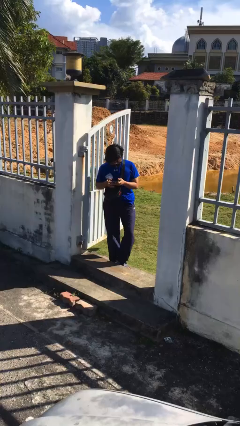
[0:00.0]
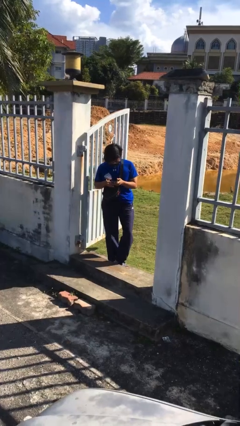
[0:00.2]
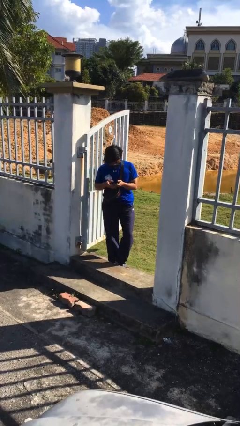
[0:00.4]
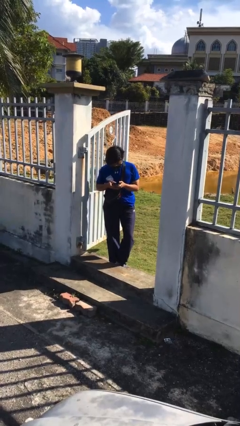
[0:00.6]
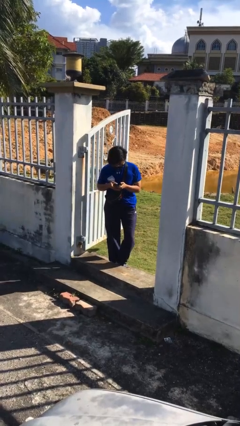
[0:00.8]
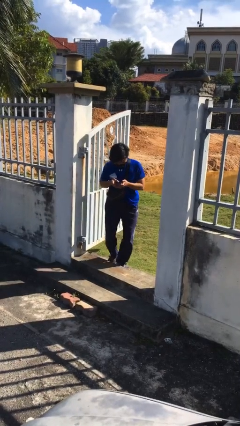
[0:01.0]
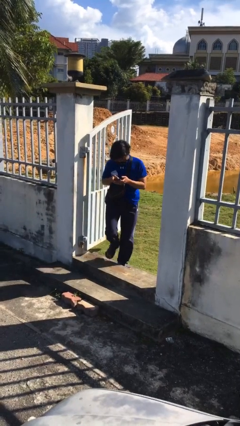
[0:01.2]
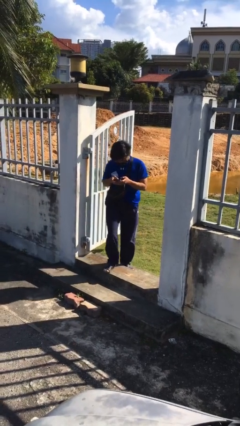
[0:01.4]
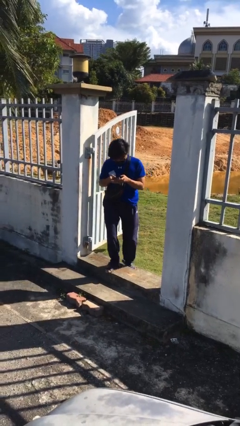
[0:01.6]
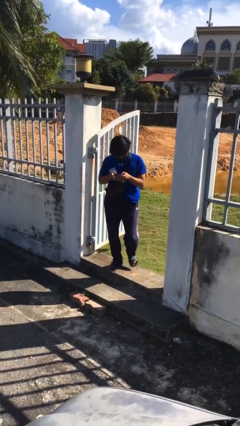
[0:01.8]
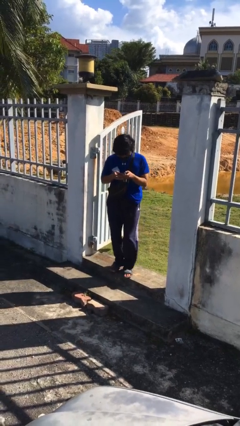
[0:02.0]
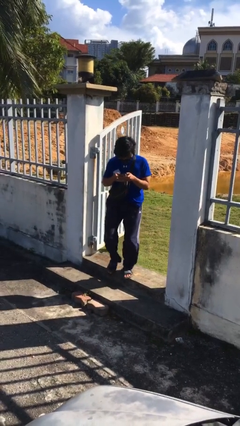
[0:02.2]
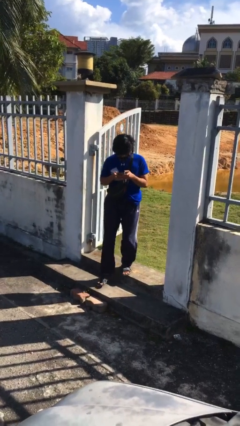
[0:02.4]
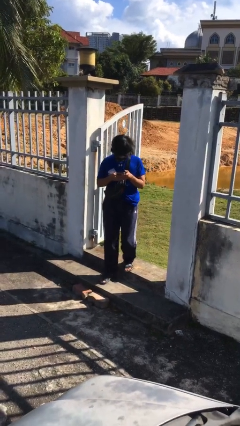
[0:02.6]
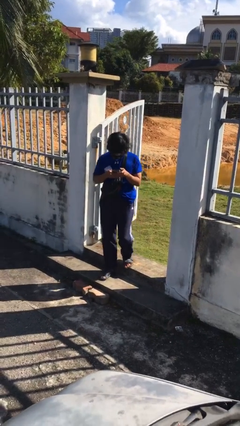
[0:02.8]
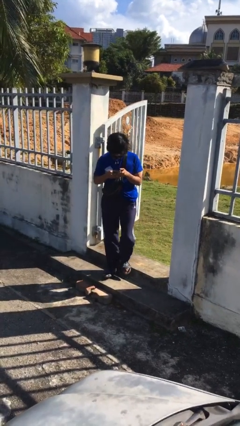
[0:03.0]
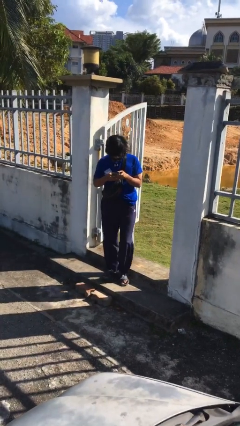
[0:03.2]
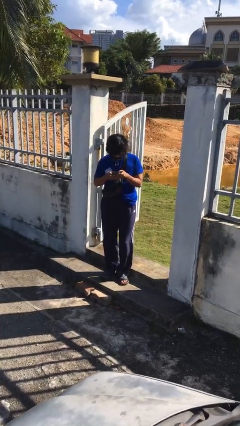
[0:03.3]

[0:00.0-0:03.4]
person enters scene through structure

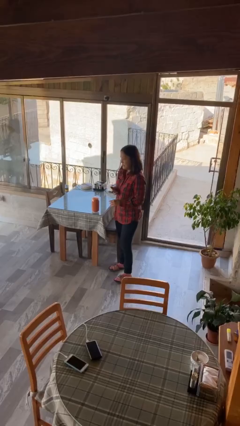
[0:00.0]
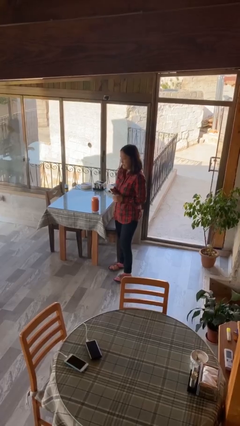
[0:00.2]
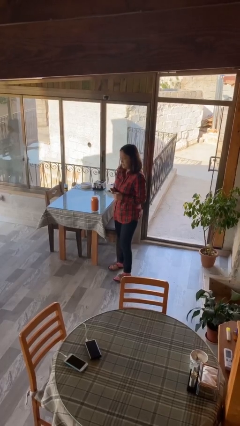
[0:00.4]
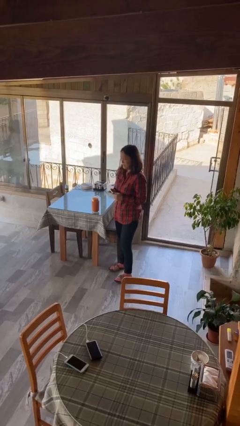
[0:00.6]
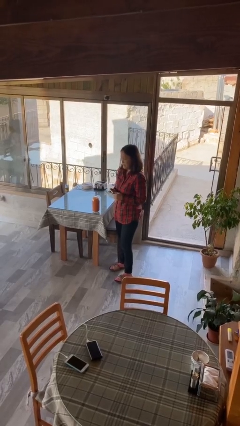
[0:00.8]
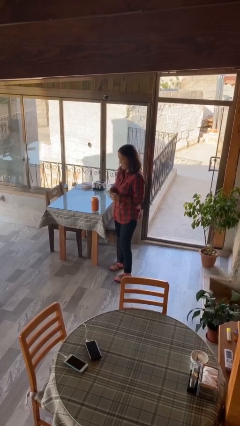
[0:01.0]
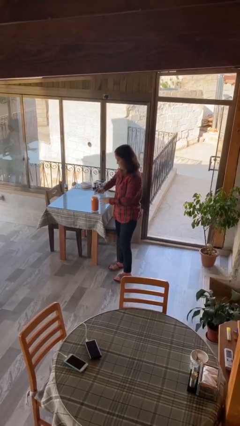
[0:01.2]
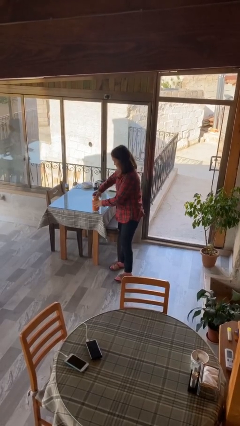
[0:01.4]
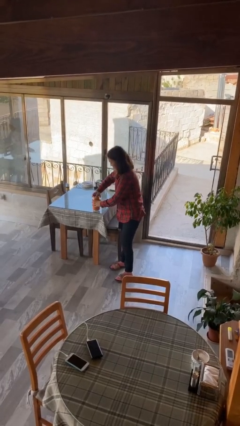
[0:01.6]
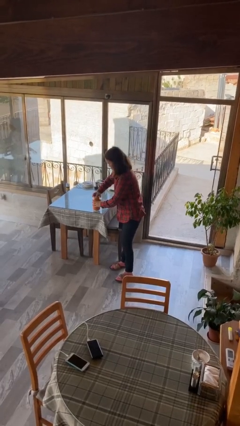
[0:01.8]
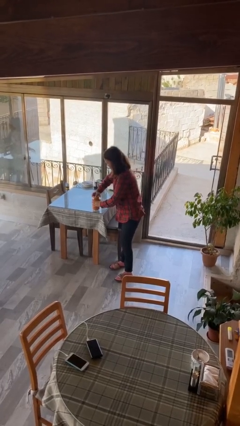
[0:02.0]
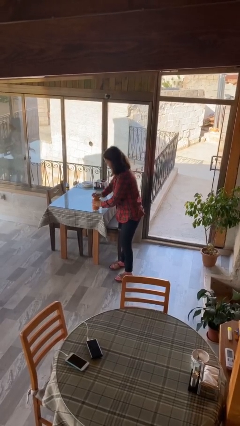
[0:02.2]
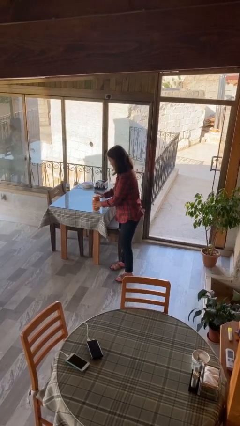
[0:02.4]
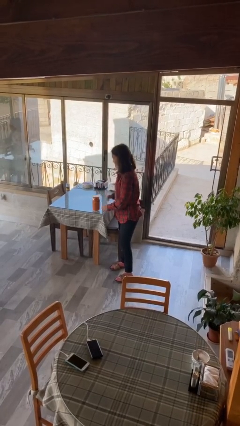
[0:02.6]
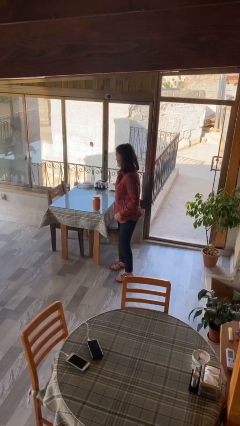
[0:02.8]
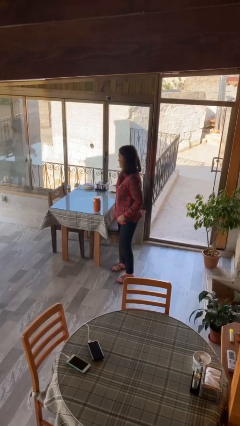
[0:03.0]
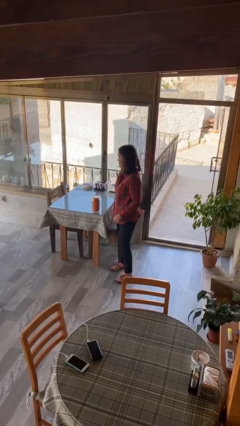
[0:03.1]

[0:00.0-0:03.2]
person closes jar

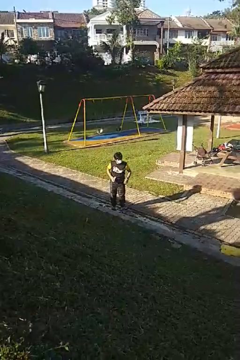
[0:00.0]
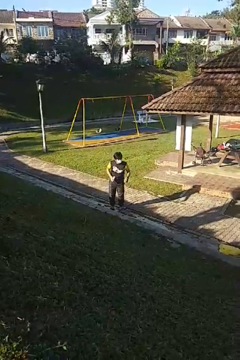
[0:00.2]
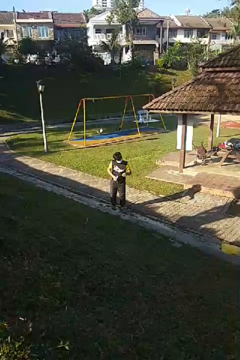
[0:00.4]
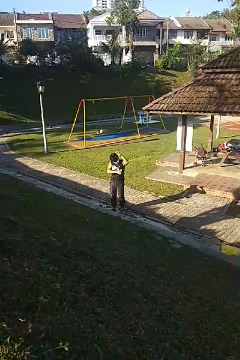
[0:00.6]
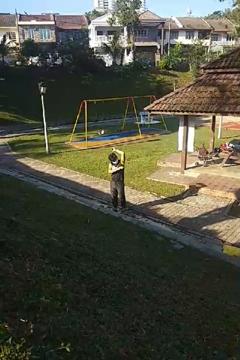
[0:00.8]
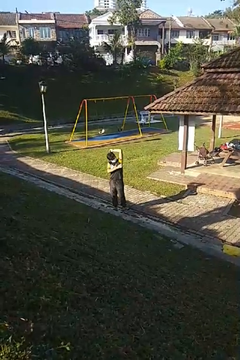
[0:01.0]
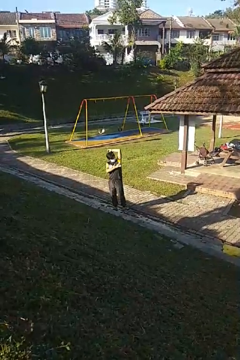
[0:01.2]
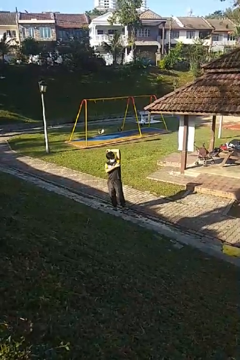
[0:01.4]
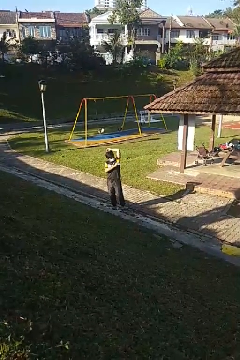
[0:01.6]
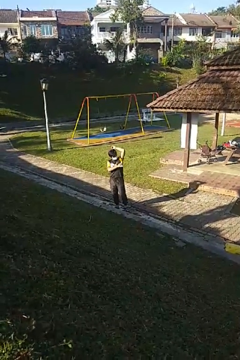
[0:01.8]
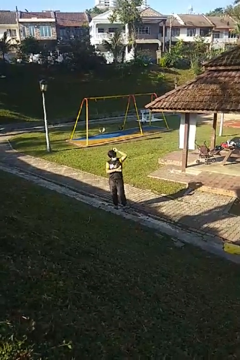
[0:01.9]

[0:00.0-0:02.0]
person applies deodorant

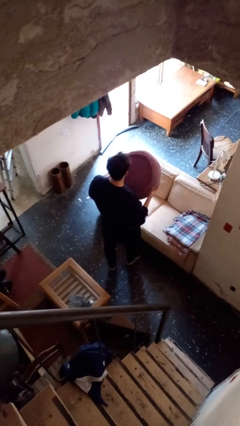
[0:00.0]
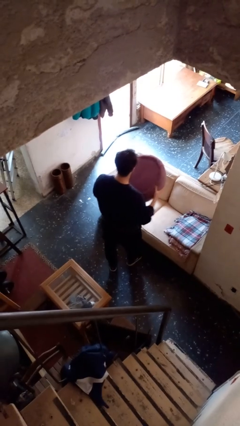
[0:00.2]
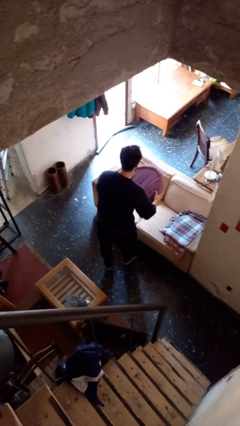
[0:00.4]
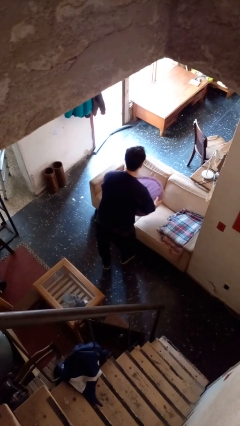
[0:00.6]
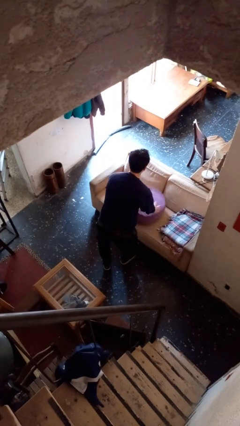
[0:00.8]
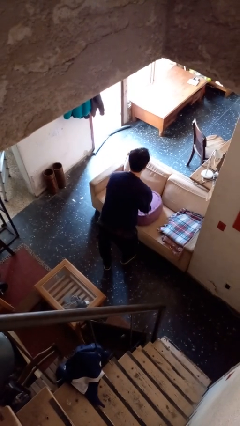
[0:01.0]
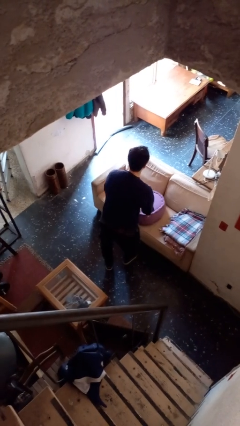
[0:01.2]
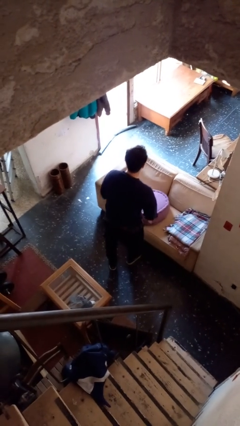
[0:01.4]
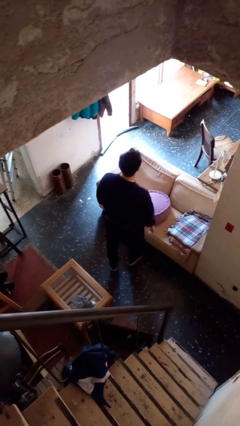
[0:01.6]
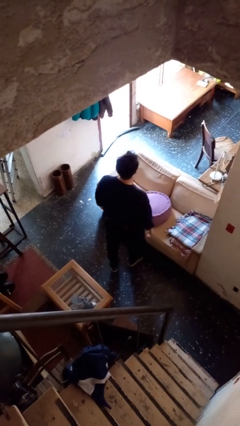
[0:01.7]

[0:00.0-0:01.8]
person puts down object on couch

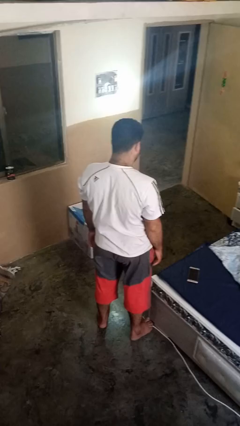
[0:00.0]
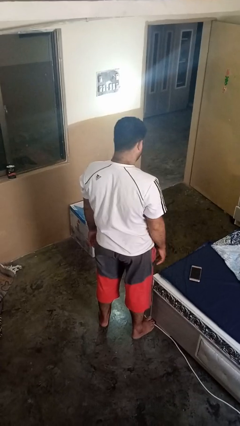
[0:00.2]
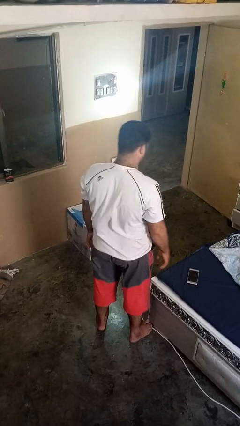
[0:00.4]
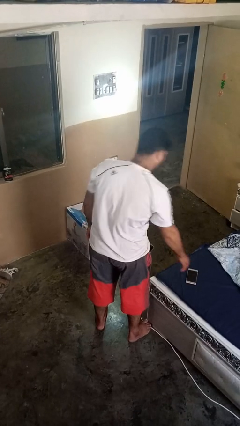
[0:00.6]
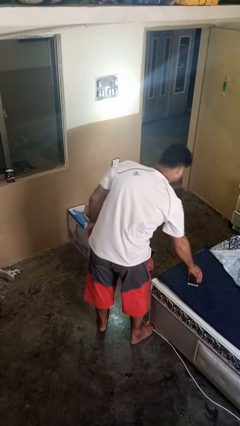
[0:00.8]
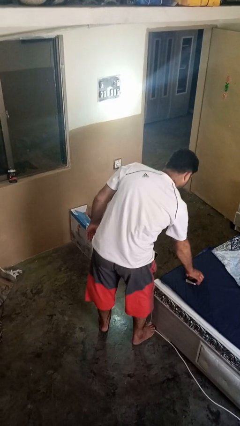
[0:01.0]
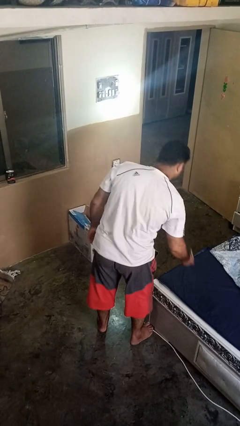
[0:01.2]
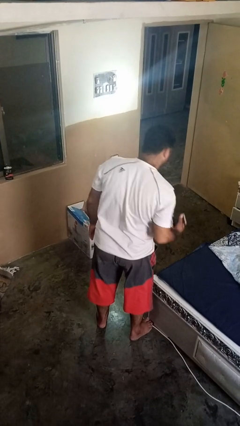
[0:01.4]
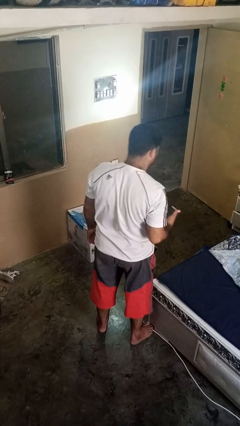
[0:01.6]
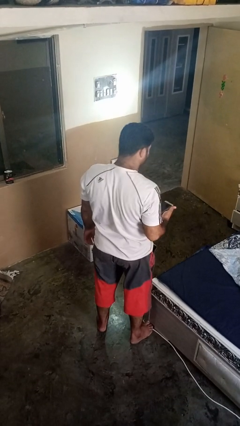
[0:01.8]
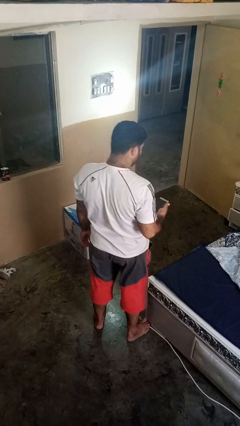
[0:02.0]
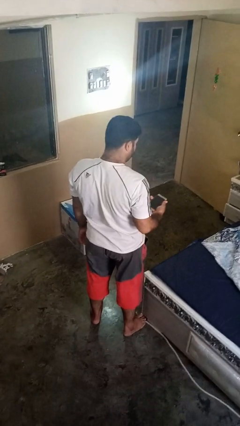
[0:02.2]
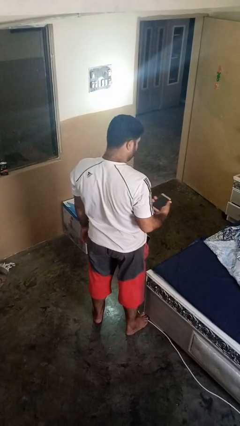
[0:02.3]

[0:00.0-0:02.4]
person takes phone from pocket

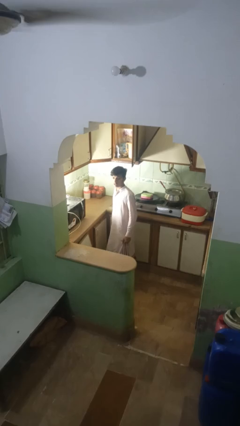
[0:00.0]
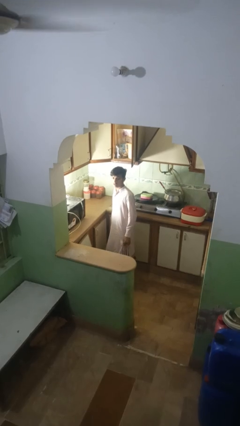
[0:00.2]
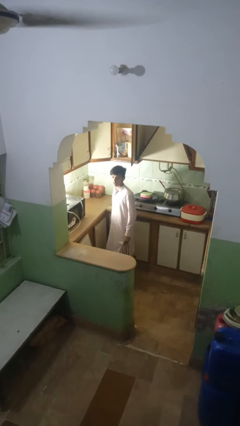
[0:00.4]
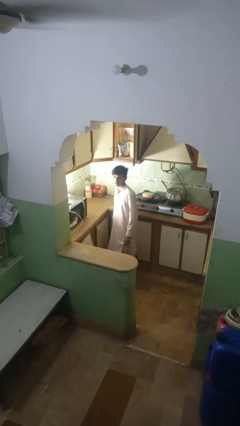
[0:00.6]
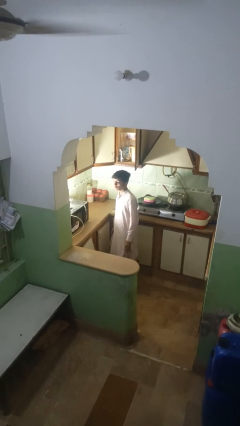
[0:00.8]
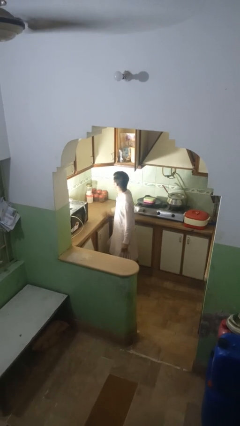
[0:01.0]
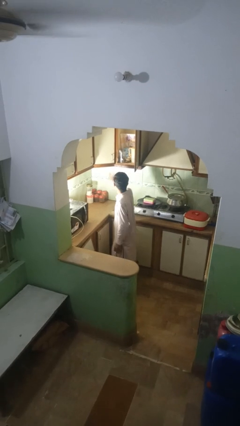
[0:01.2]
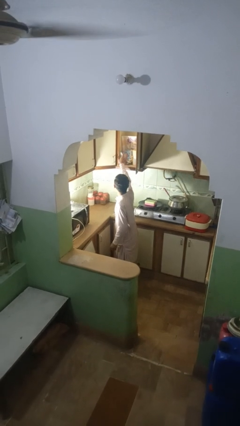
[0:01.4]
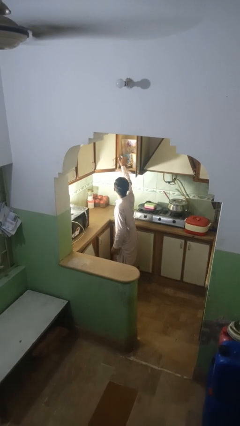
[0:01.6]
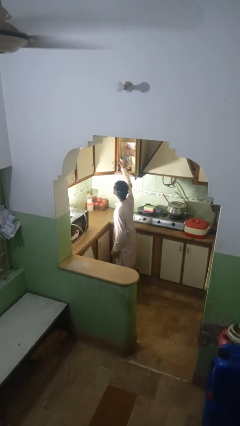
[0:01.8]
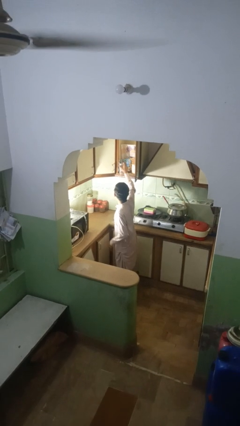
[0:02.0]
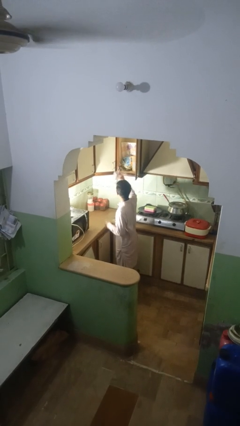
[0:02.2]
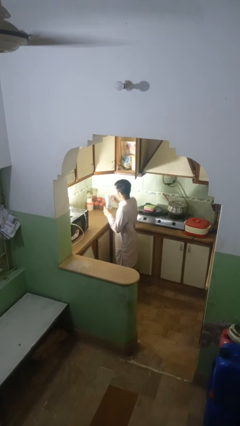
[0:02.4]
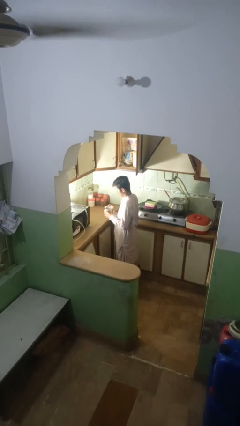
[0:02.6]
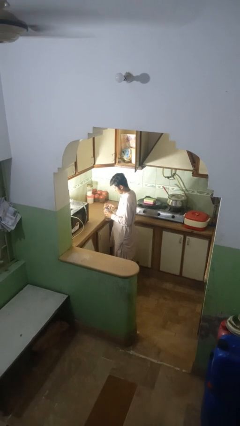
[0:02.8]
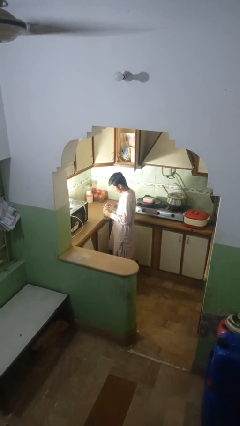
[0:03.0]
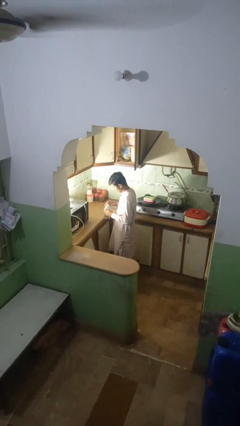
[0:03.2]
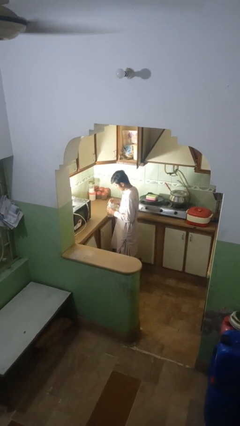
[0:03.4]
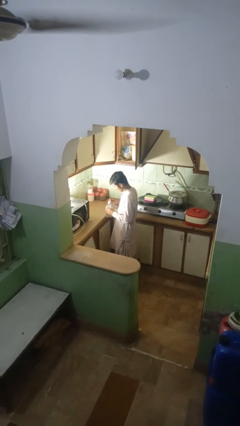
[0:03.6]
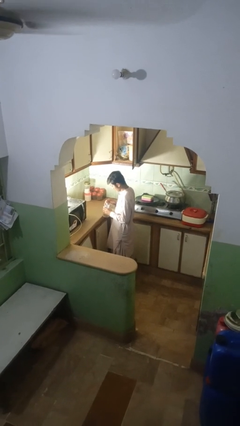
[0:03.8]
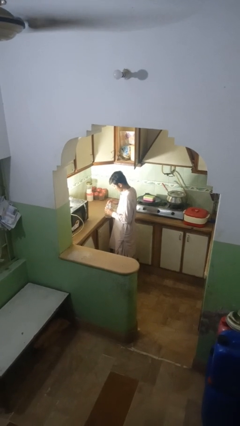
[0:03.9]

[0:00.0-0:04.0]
person takes object from kitchen drawer

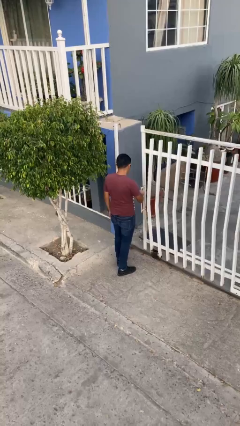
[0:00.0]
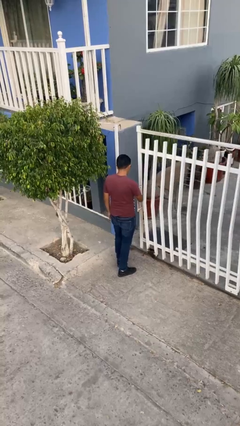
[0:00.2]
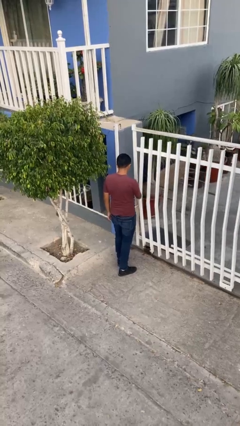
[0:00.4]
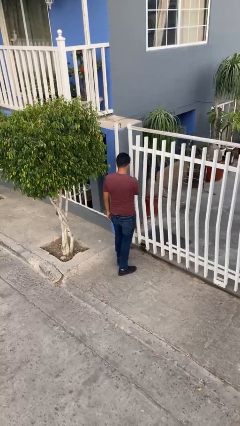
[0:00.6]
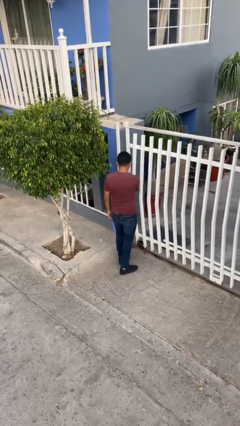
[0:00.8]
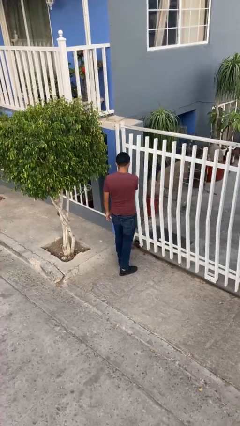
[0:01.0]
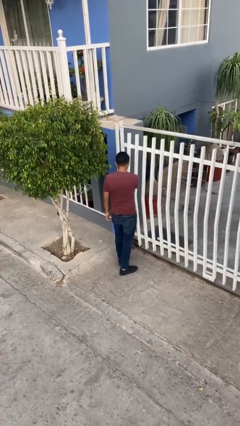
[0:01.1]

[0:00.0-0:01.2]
person closes facility door
